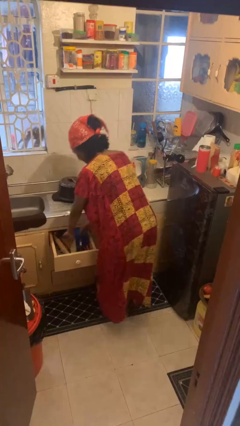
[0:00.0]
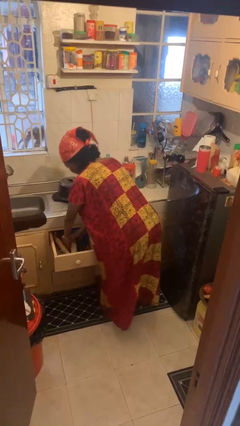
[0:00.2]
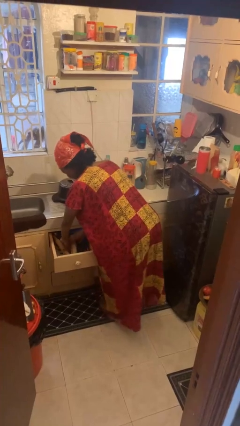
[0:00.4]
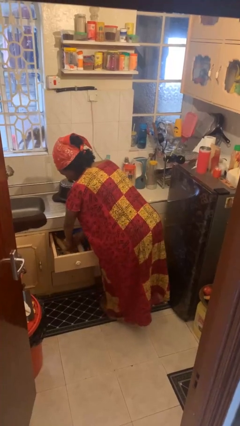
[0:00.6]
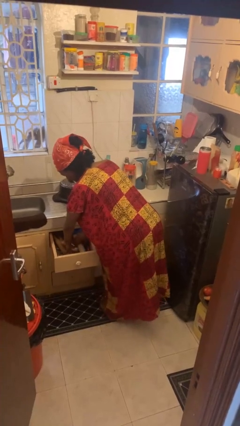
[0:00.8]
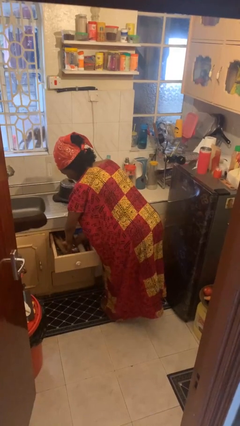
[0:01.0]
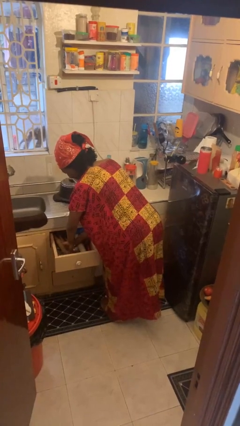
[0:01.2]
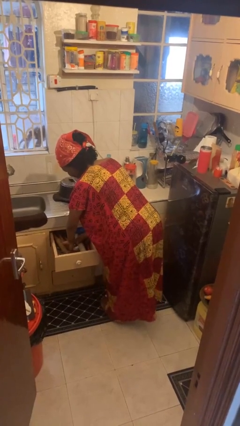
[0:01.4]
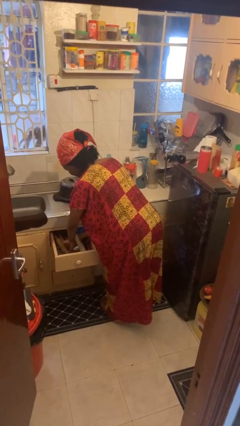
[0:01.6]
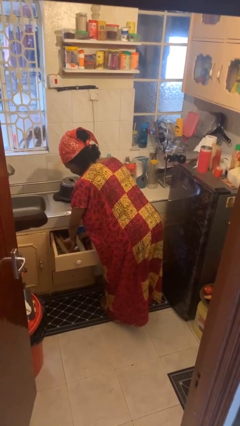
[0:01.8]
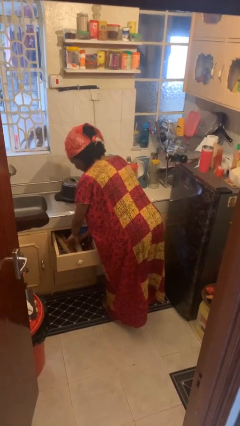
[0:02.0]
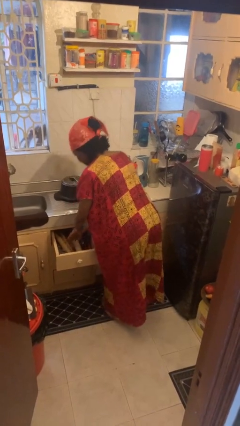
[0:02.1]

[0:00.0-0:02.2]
person searches in kitchen drawer

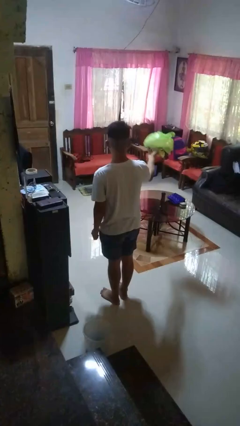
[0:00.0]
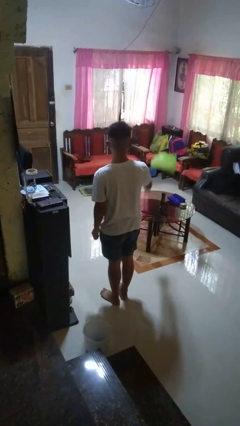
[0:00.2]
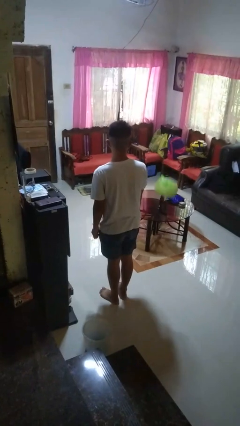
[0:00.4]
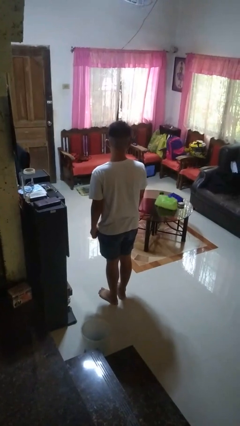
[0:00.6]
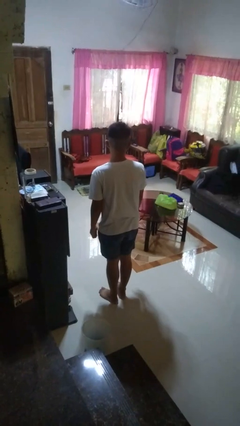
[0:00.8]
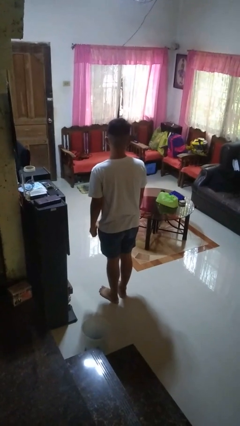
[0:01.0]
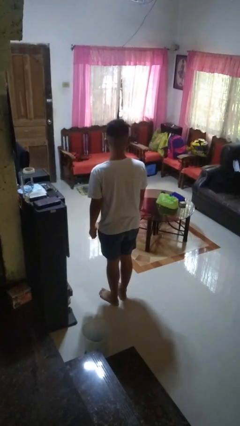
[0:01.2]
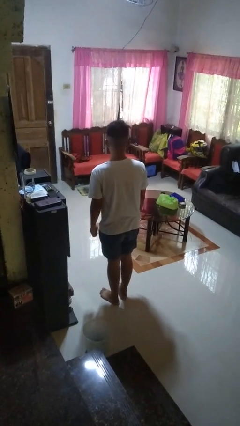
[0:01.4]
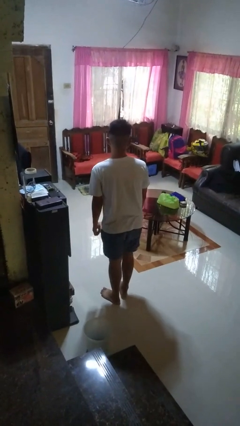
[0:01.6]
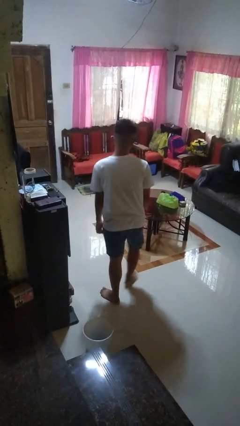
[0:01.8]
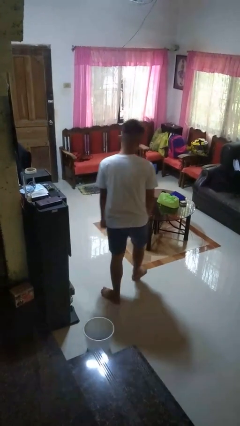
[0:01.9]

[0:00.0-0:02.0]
person throws object on table

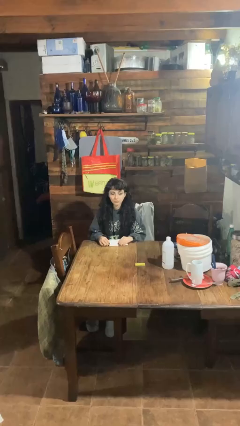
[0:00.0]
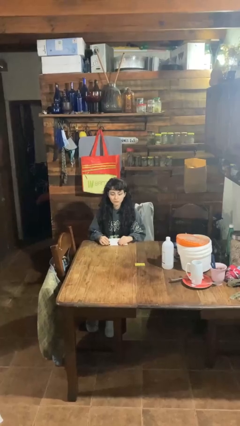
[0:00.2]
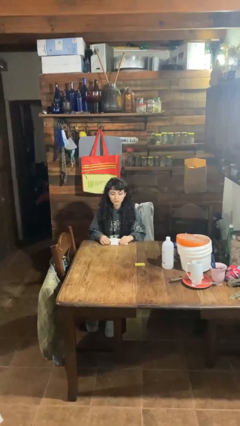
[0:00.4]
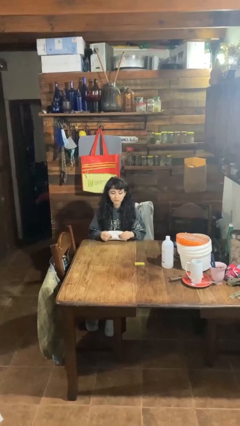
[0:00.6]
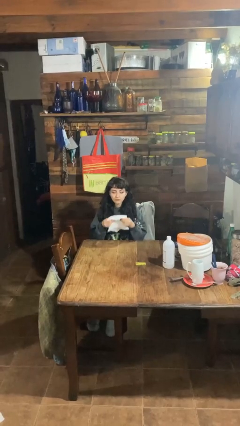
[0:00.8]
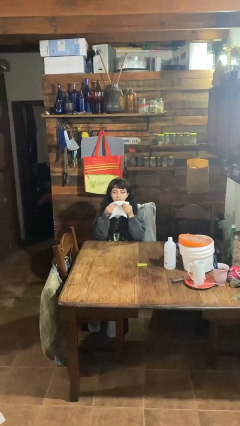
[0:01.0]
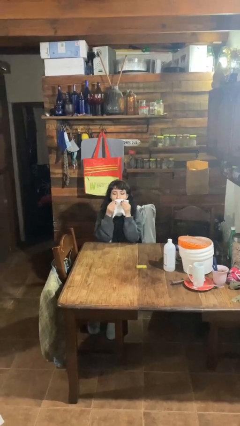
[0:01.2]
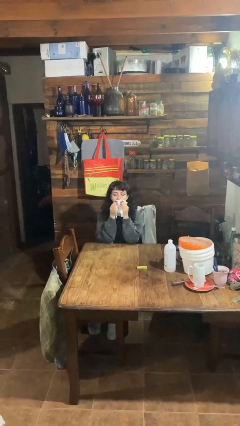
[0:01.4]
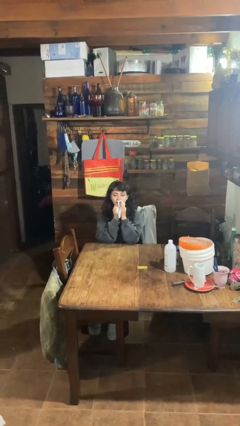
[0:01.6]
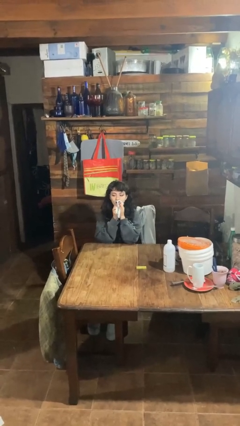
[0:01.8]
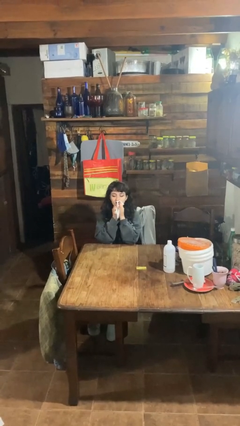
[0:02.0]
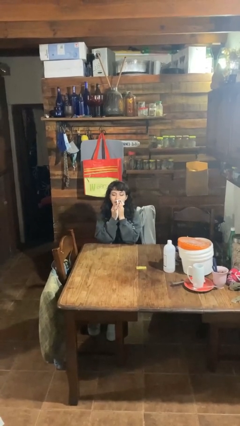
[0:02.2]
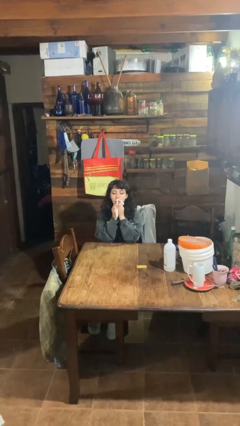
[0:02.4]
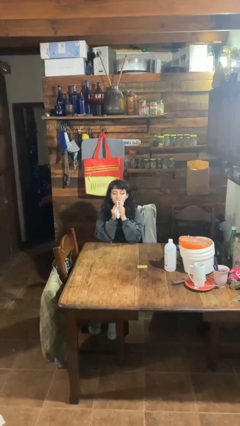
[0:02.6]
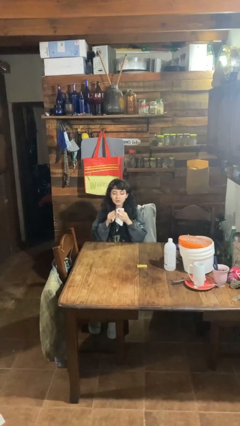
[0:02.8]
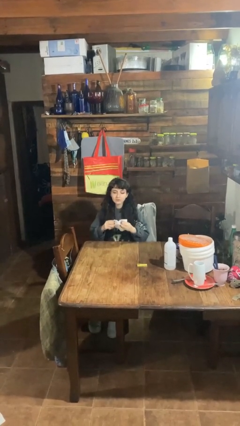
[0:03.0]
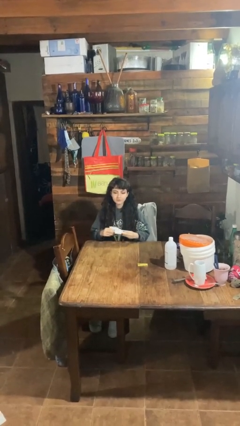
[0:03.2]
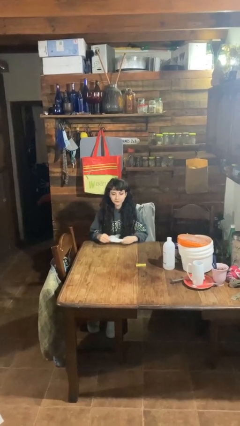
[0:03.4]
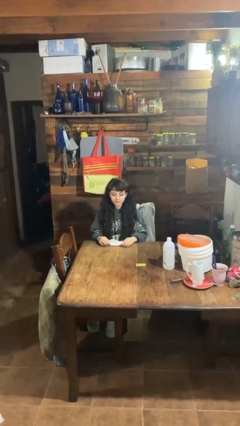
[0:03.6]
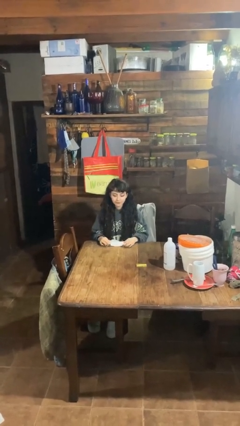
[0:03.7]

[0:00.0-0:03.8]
person wipes mouth with napkin

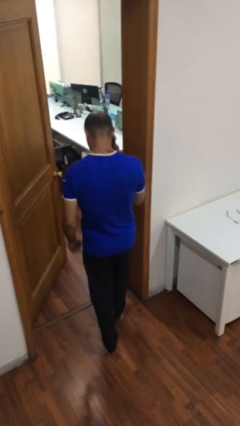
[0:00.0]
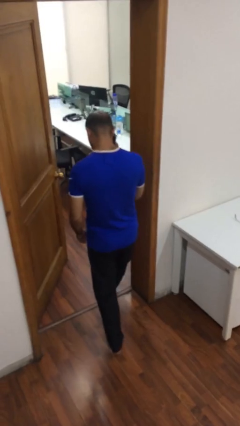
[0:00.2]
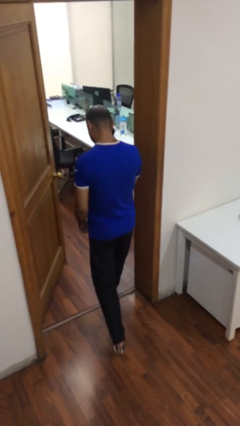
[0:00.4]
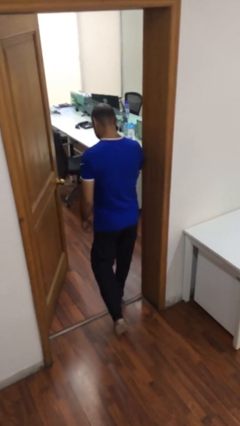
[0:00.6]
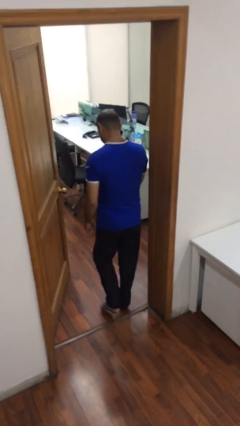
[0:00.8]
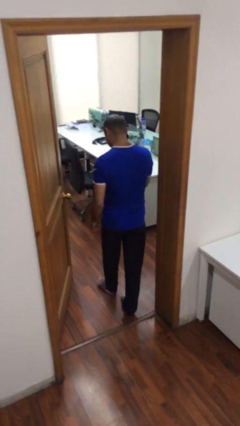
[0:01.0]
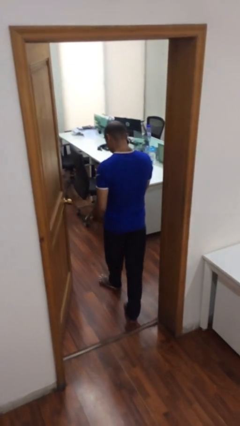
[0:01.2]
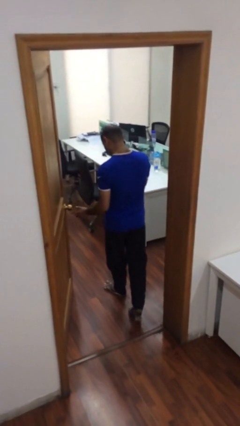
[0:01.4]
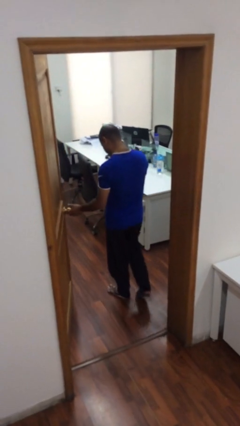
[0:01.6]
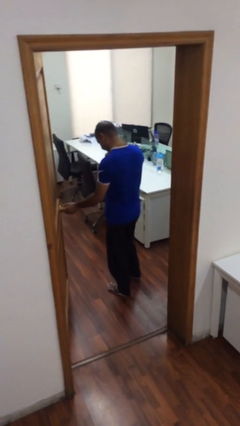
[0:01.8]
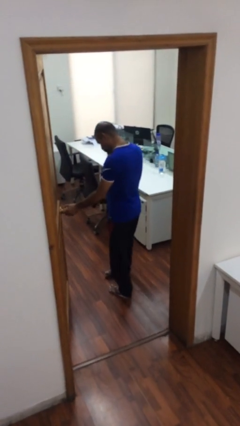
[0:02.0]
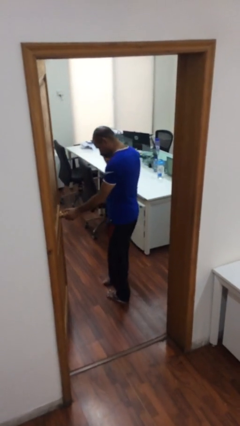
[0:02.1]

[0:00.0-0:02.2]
person exits scene through structure

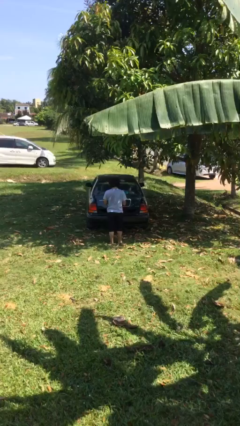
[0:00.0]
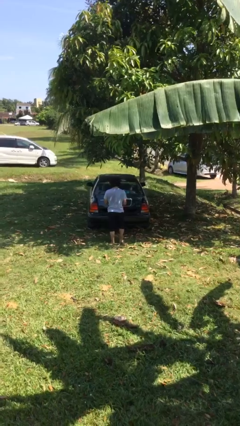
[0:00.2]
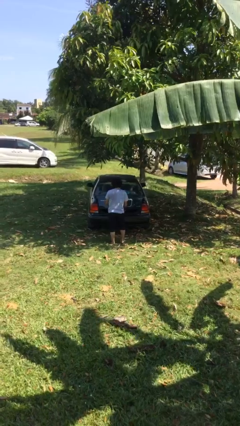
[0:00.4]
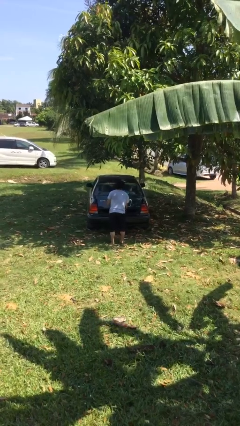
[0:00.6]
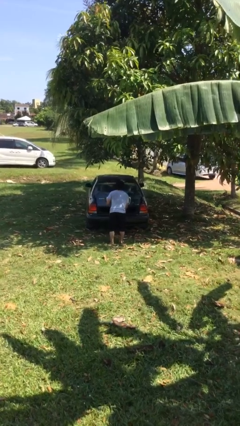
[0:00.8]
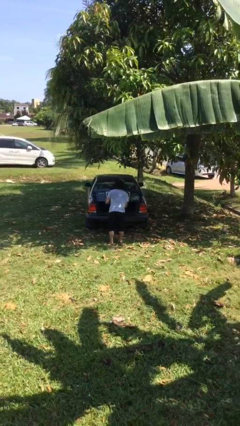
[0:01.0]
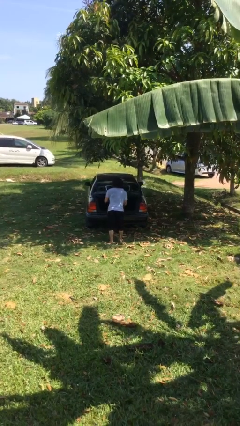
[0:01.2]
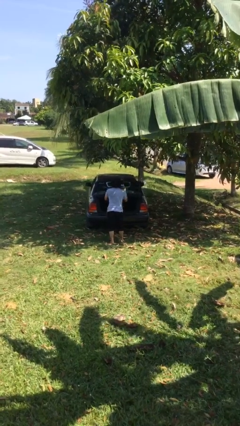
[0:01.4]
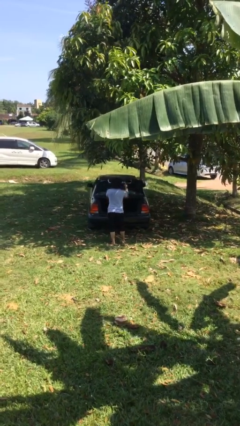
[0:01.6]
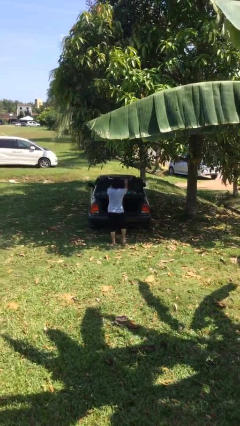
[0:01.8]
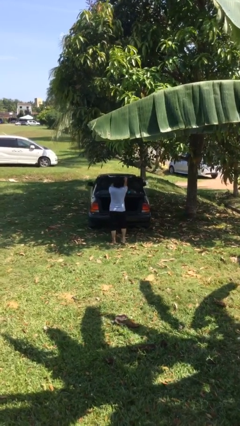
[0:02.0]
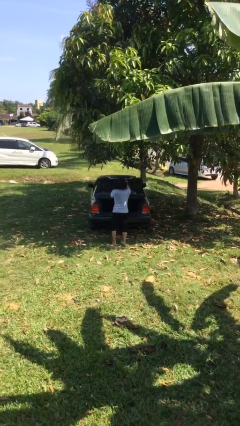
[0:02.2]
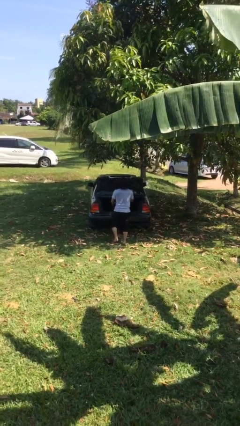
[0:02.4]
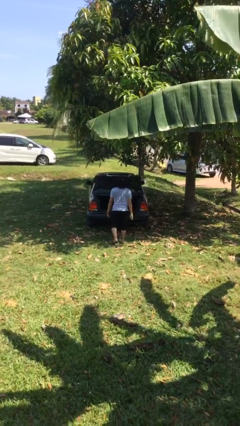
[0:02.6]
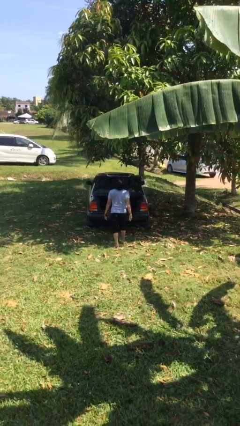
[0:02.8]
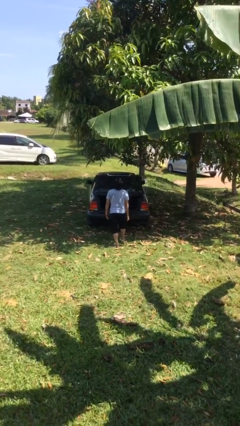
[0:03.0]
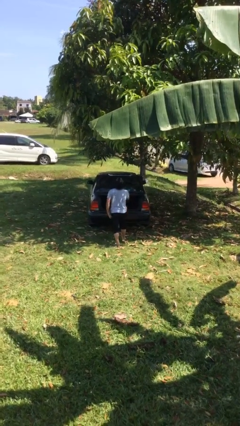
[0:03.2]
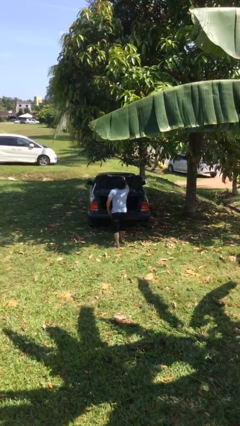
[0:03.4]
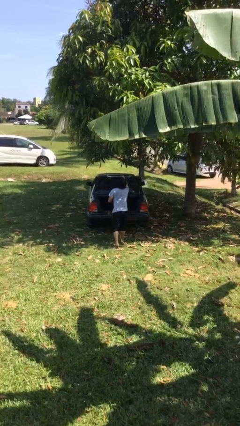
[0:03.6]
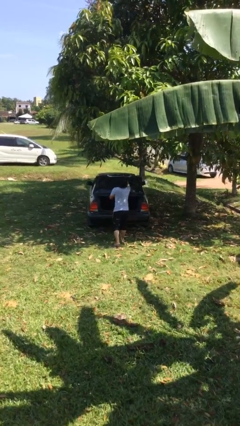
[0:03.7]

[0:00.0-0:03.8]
person opens car trunk

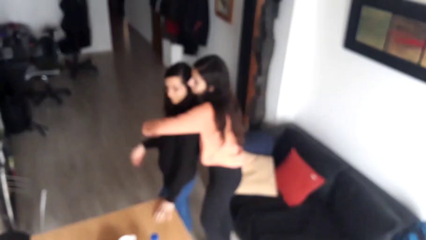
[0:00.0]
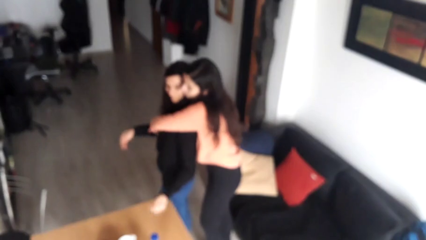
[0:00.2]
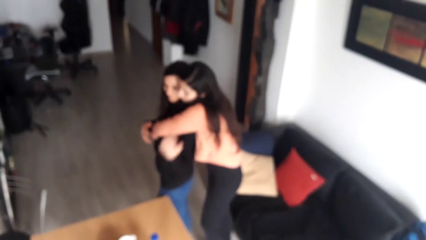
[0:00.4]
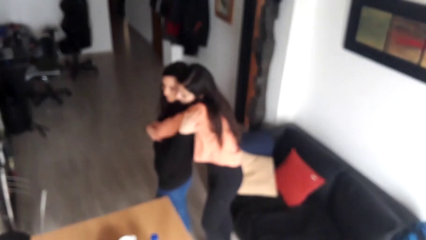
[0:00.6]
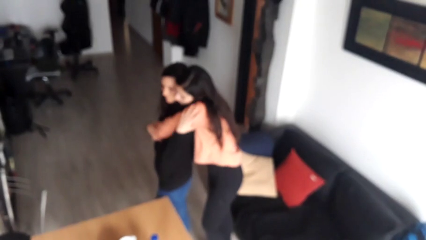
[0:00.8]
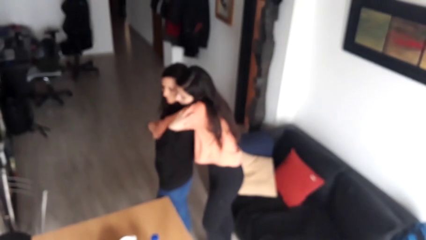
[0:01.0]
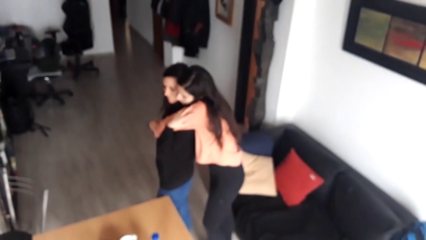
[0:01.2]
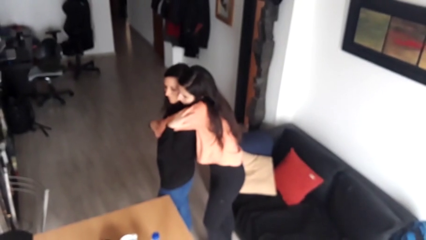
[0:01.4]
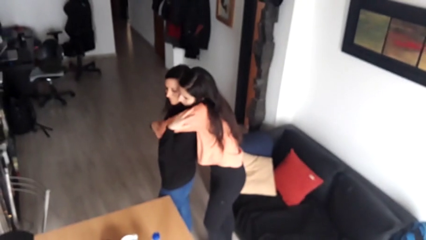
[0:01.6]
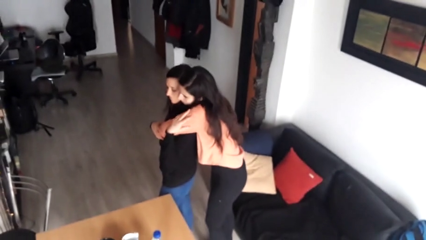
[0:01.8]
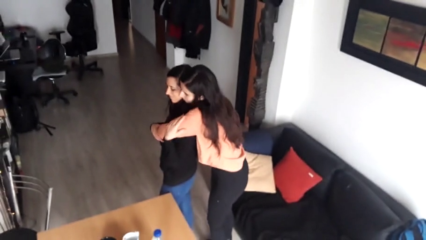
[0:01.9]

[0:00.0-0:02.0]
person hugs person from behind

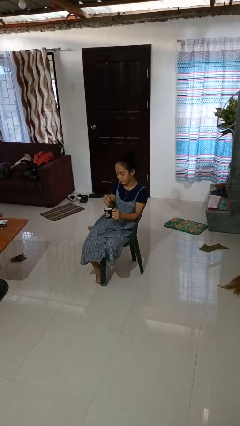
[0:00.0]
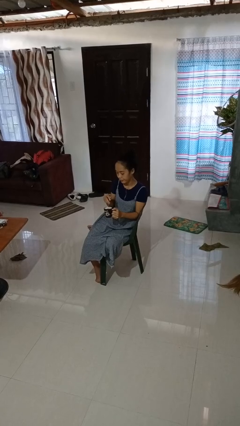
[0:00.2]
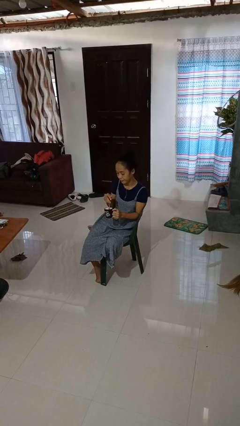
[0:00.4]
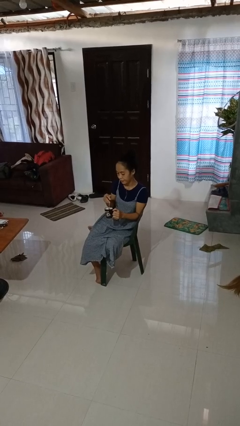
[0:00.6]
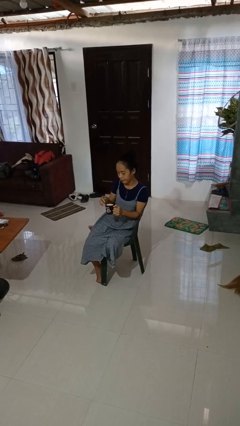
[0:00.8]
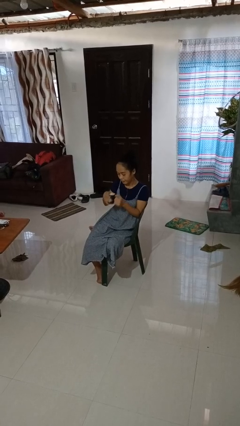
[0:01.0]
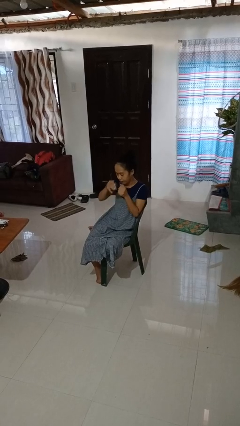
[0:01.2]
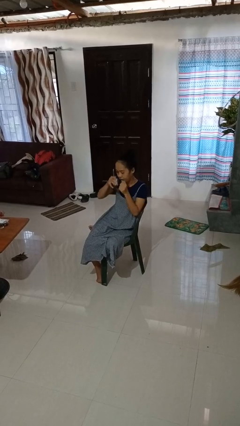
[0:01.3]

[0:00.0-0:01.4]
person stirs mug
